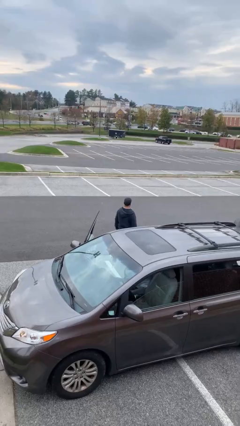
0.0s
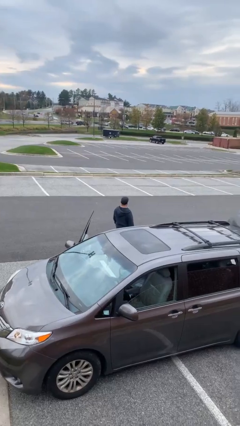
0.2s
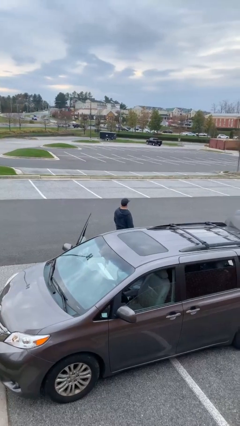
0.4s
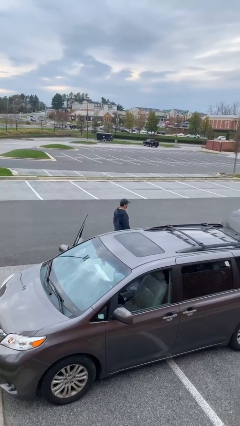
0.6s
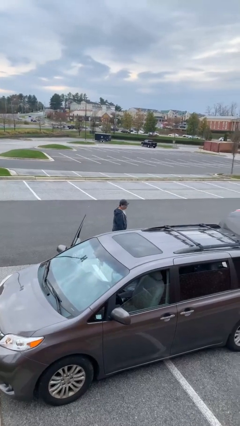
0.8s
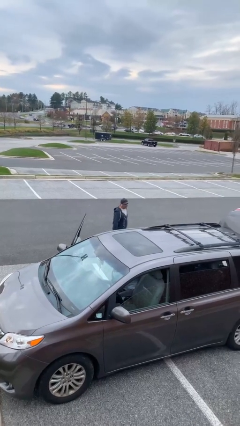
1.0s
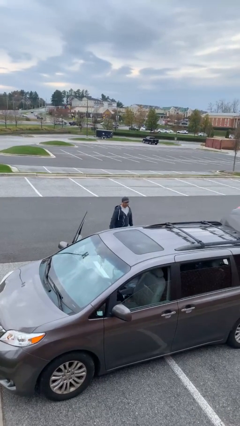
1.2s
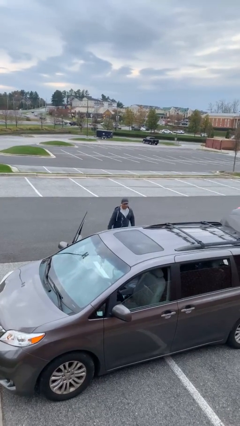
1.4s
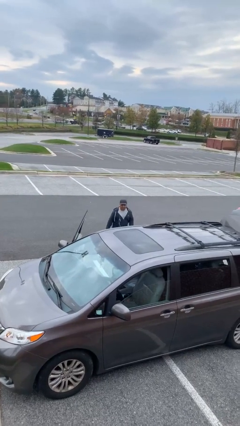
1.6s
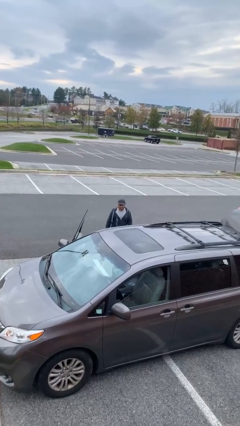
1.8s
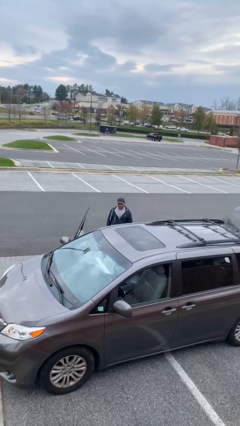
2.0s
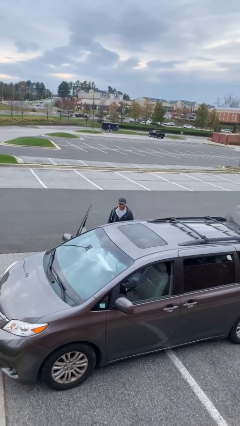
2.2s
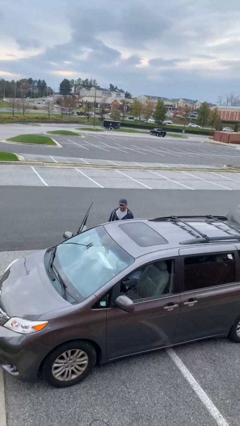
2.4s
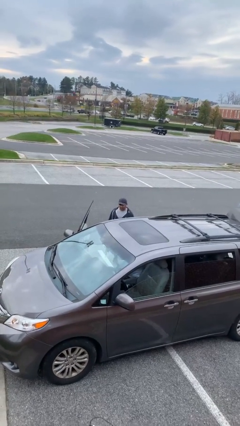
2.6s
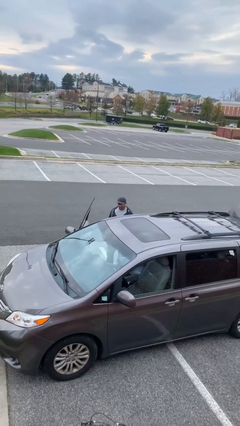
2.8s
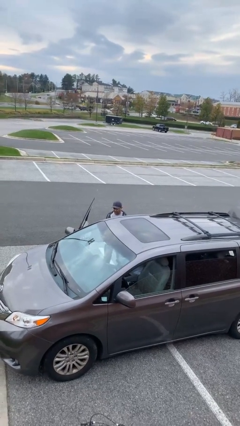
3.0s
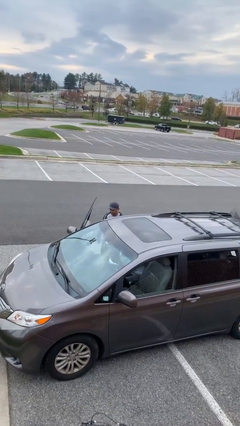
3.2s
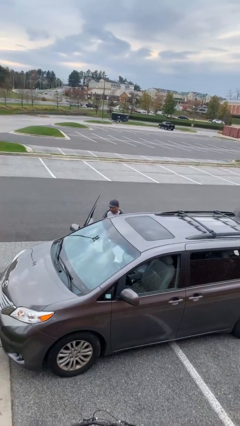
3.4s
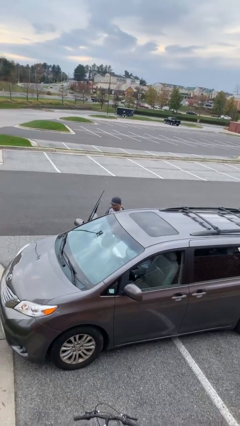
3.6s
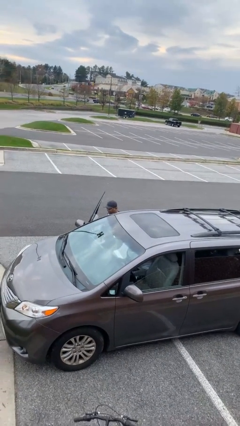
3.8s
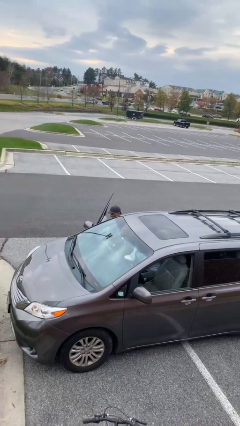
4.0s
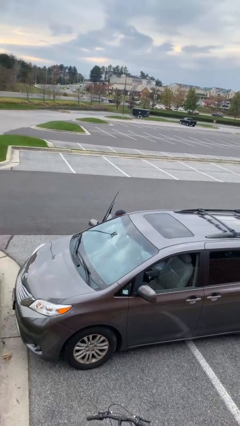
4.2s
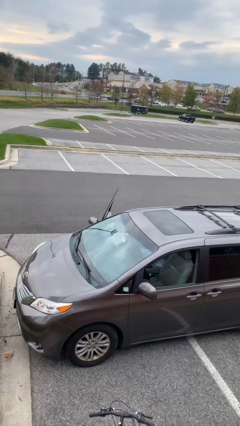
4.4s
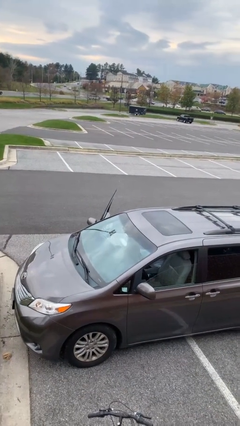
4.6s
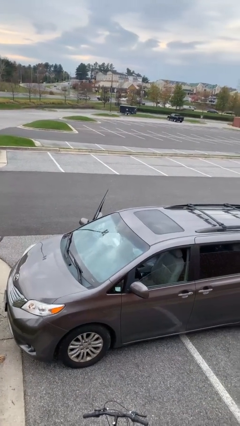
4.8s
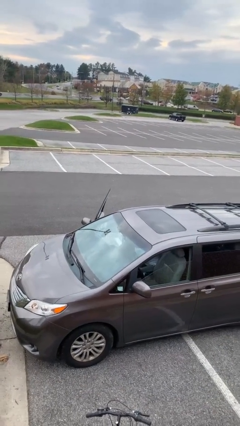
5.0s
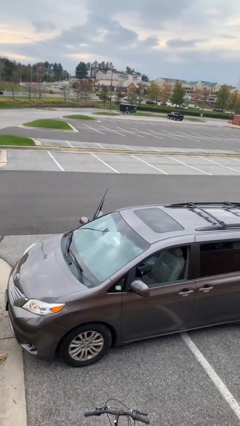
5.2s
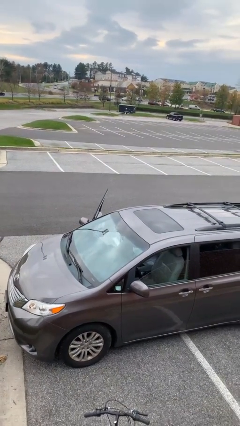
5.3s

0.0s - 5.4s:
person enters car

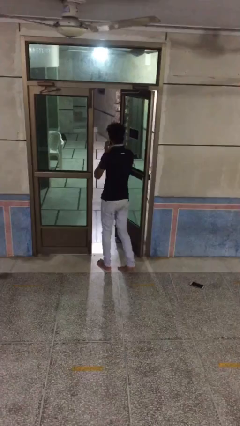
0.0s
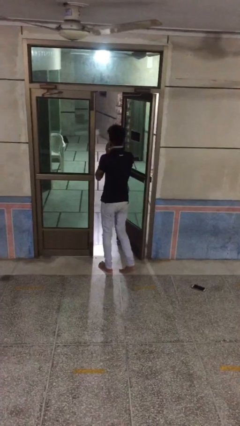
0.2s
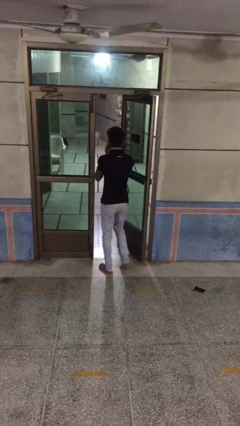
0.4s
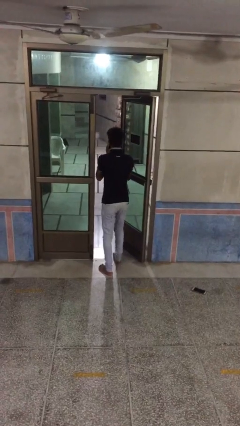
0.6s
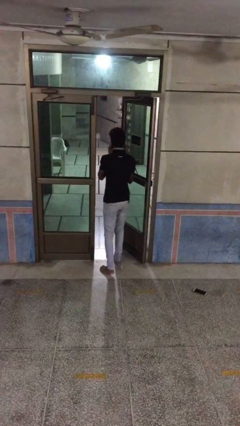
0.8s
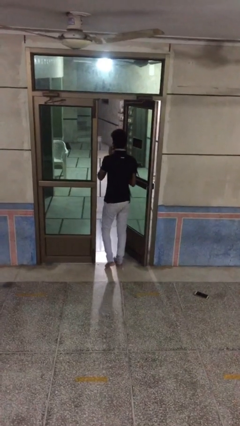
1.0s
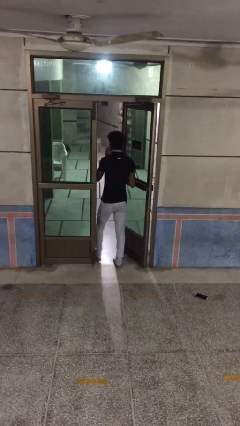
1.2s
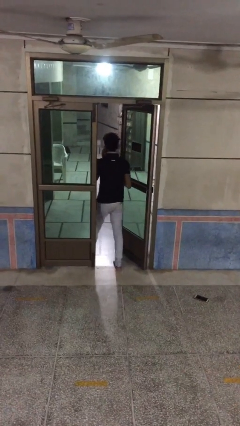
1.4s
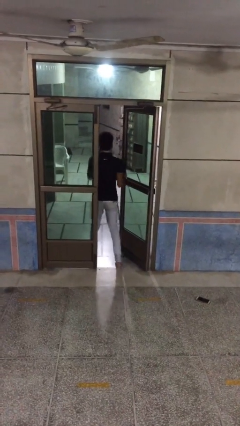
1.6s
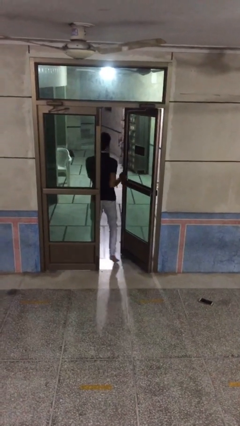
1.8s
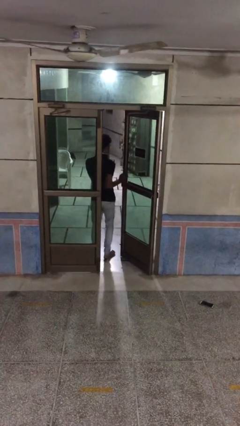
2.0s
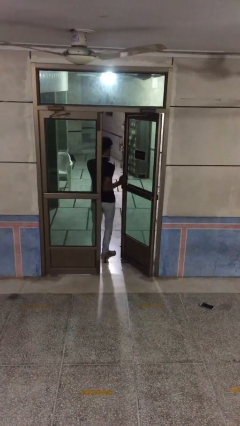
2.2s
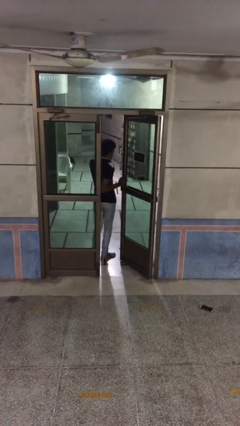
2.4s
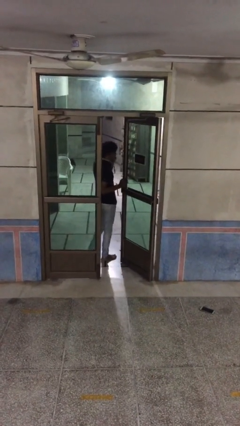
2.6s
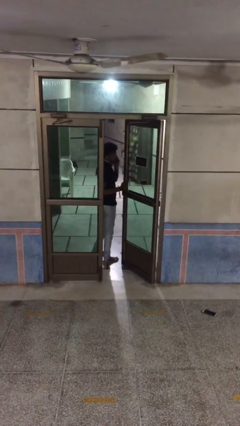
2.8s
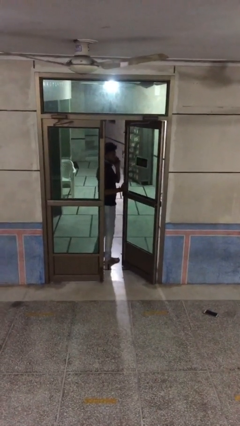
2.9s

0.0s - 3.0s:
person exits scene through structure

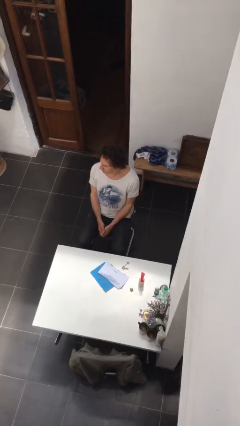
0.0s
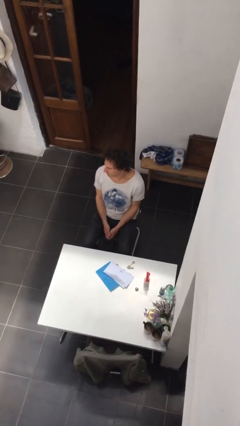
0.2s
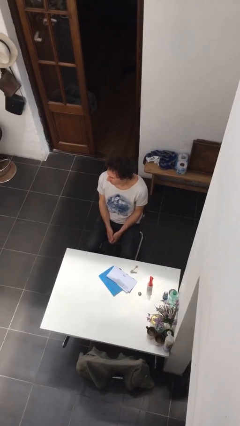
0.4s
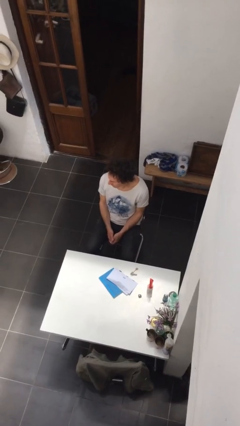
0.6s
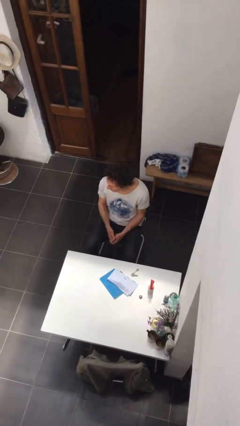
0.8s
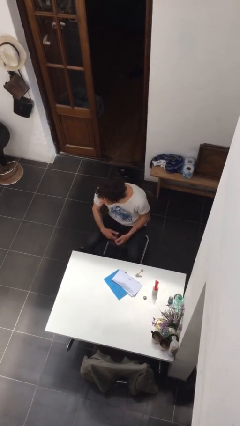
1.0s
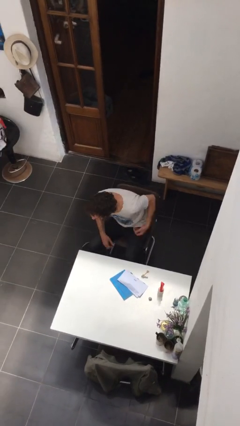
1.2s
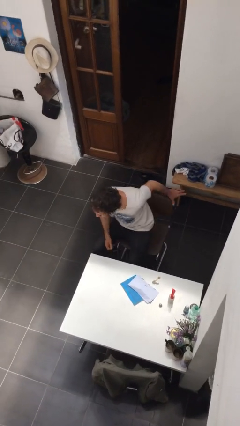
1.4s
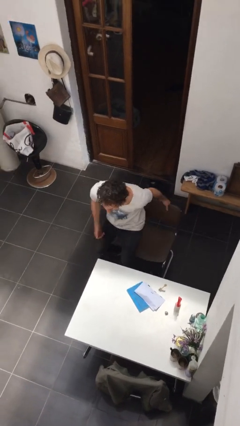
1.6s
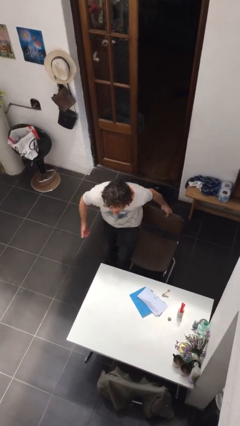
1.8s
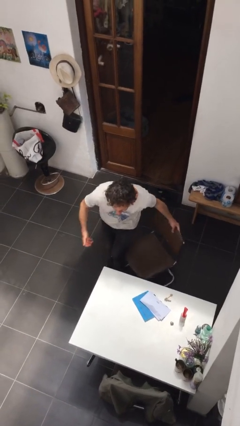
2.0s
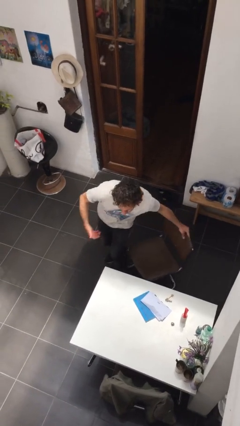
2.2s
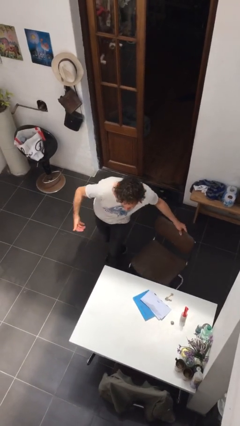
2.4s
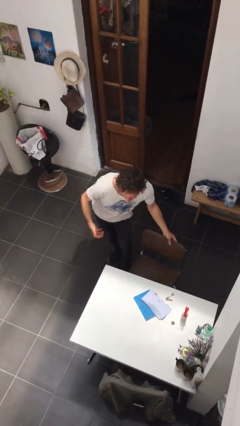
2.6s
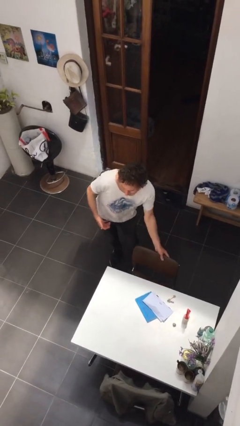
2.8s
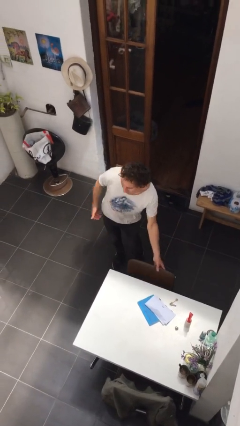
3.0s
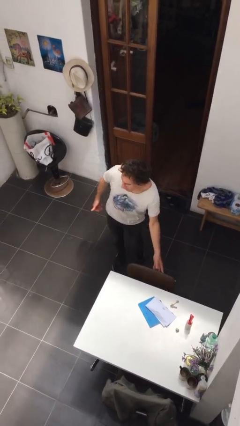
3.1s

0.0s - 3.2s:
person stands up

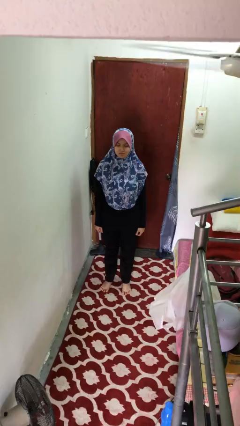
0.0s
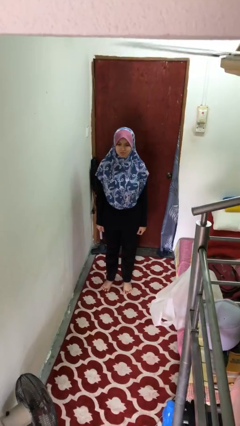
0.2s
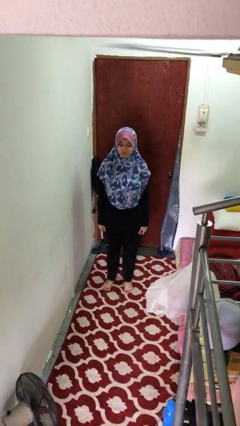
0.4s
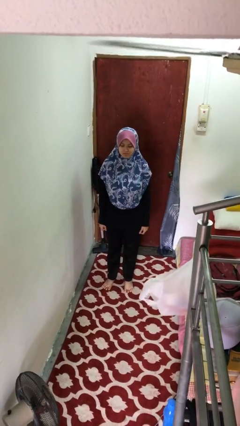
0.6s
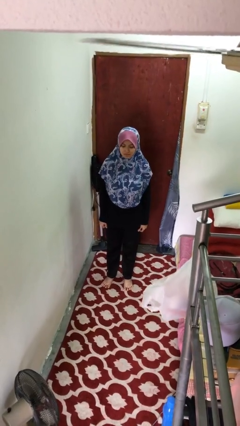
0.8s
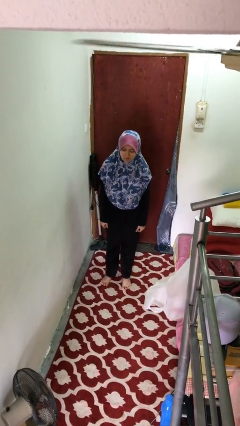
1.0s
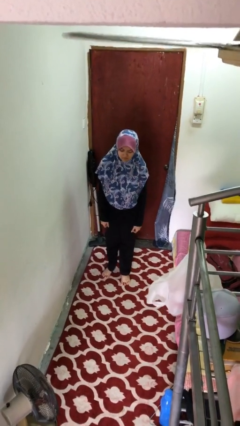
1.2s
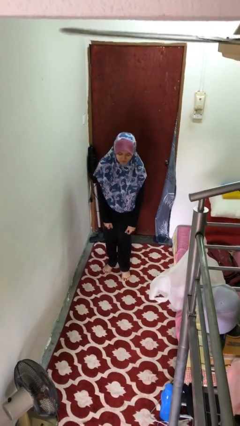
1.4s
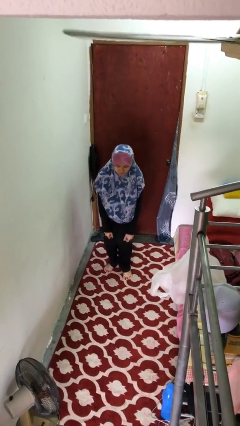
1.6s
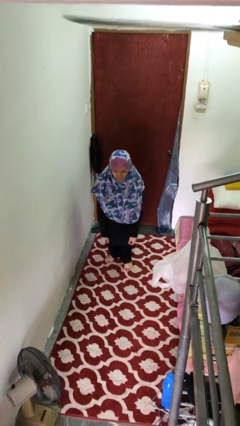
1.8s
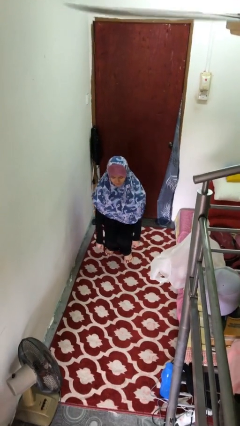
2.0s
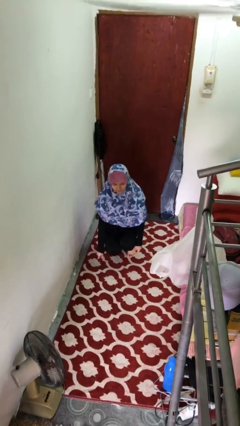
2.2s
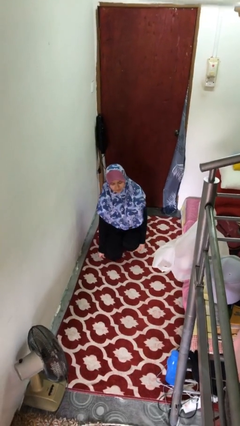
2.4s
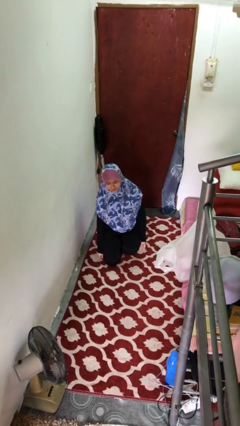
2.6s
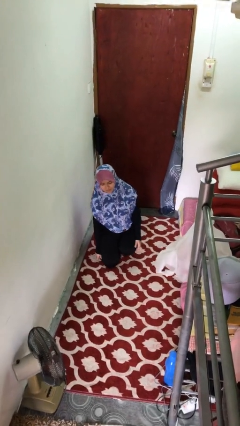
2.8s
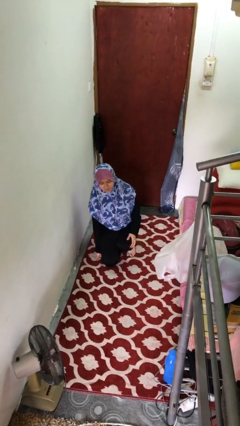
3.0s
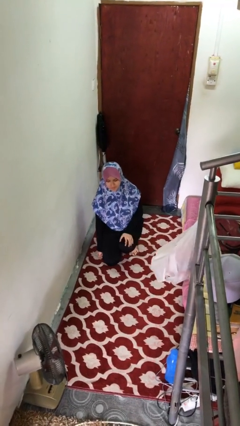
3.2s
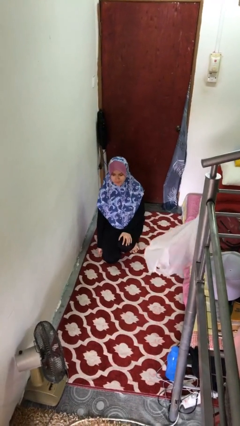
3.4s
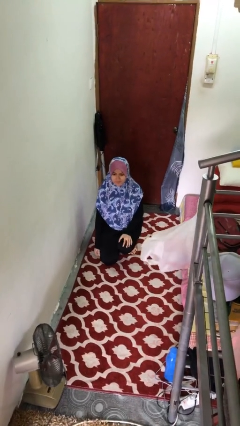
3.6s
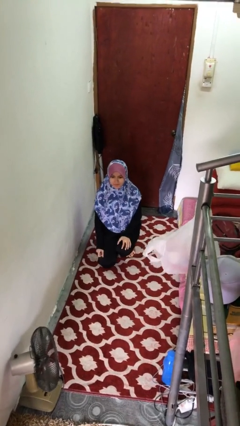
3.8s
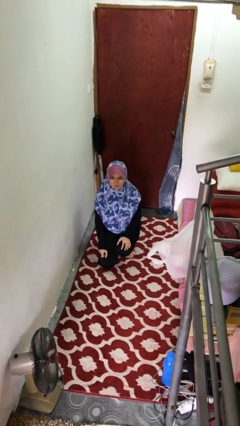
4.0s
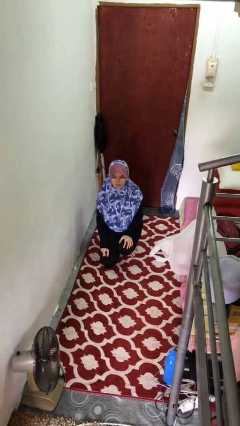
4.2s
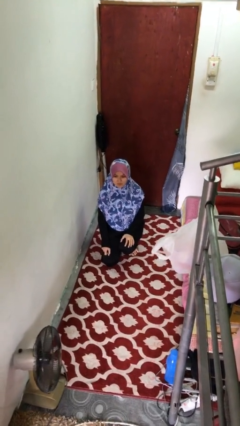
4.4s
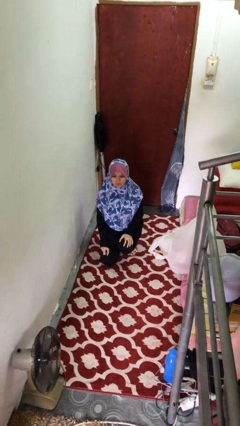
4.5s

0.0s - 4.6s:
person kneels

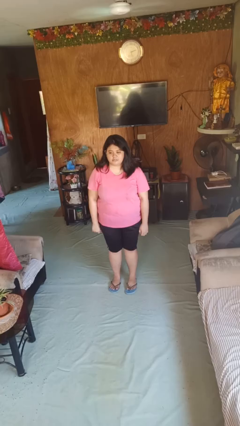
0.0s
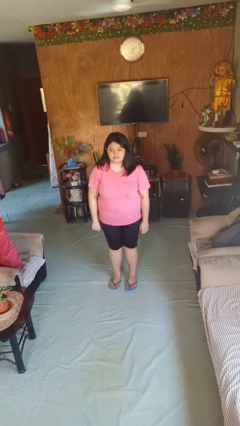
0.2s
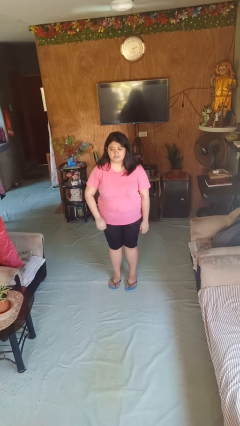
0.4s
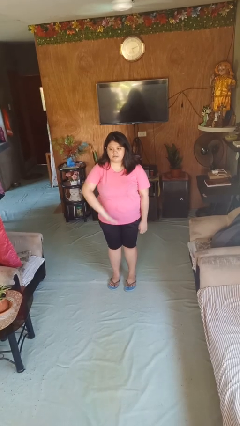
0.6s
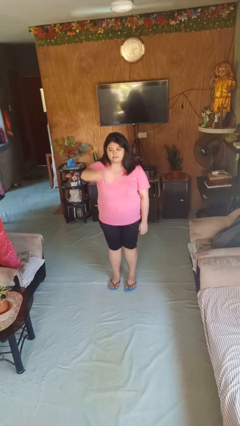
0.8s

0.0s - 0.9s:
person gestures swipe up

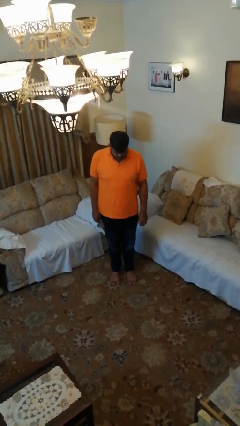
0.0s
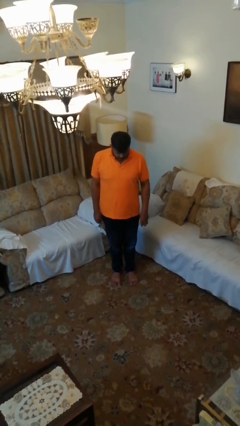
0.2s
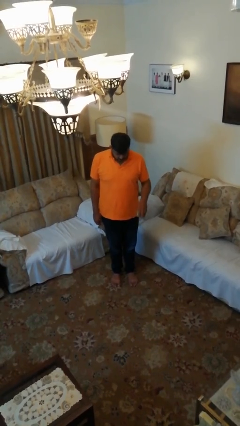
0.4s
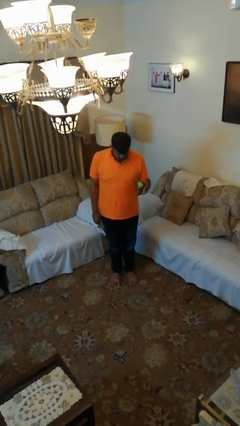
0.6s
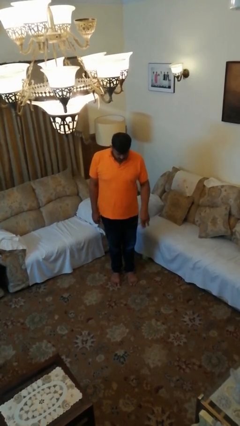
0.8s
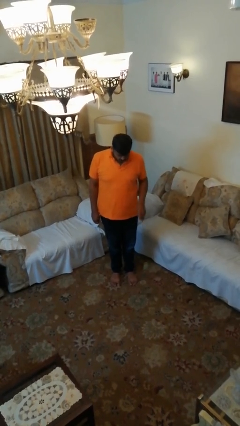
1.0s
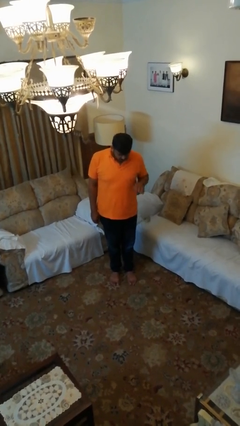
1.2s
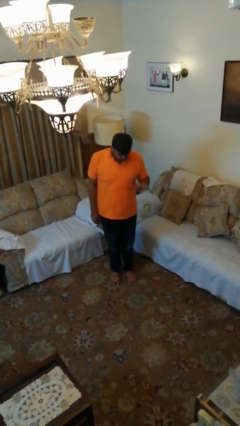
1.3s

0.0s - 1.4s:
person bounces ball on floor
